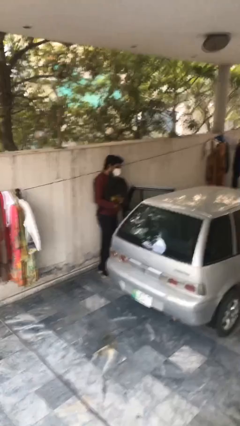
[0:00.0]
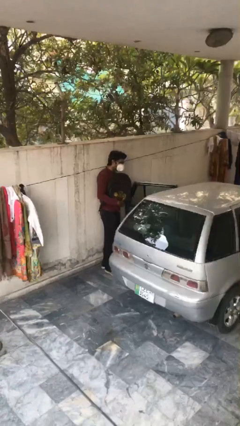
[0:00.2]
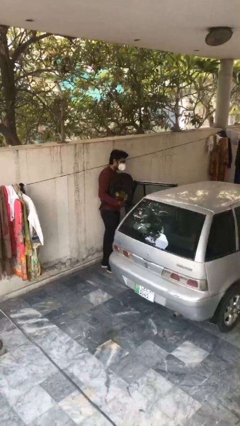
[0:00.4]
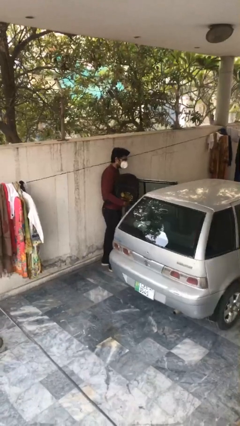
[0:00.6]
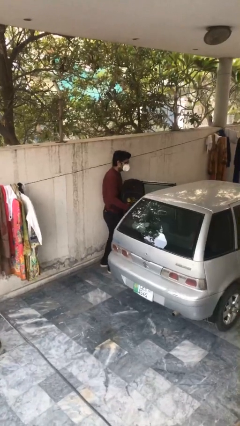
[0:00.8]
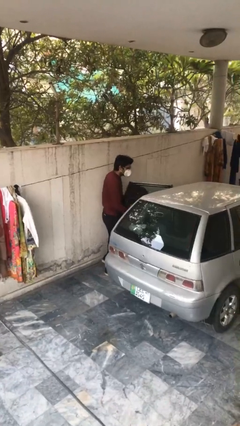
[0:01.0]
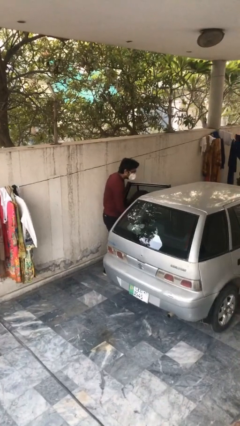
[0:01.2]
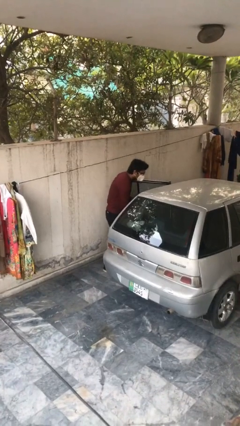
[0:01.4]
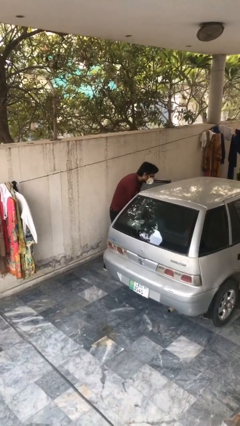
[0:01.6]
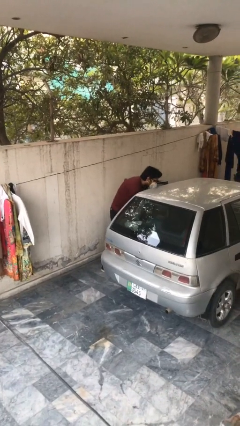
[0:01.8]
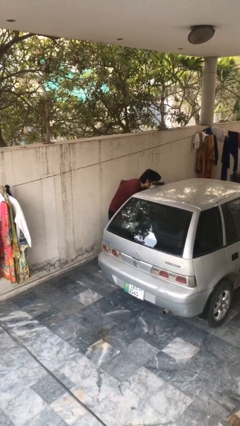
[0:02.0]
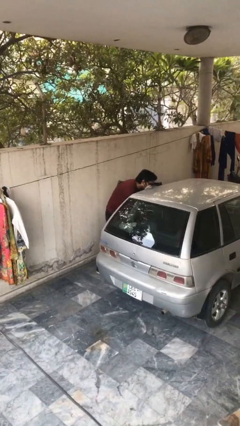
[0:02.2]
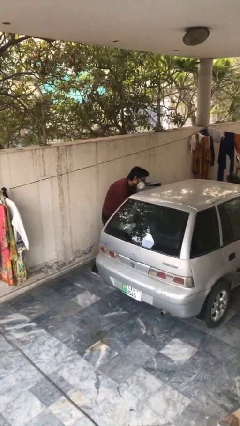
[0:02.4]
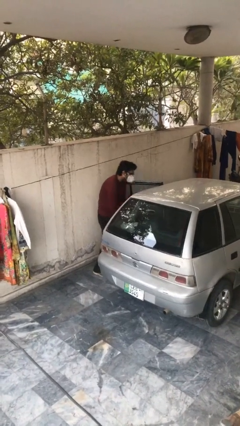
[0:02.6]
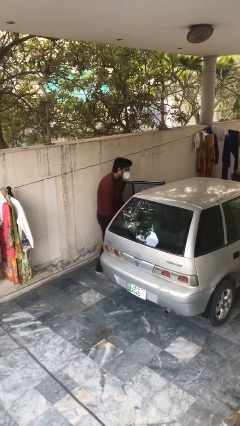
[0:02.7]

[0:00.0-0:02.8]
person loads car

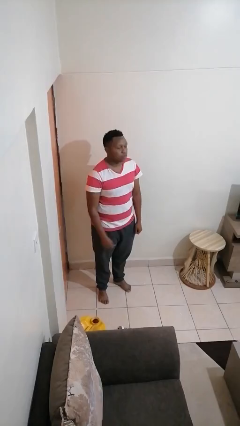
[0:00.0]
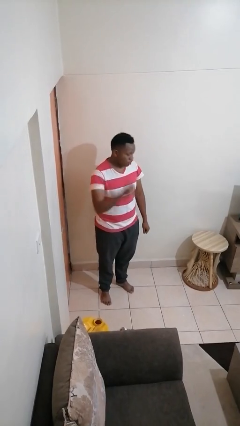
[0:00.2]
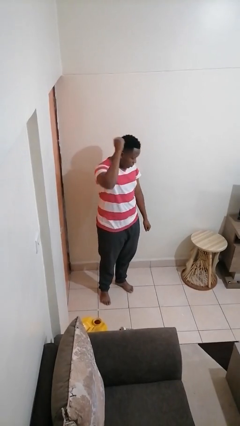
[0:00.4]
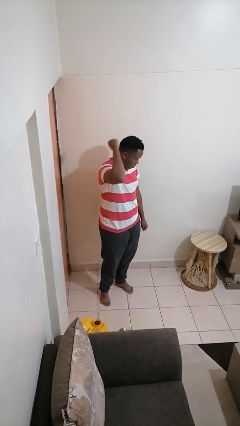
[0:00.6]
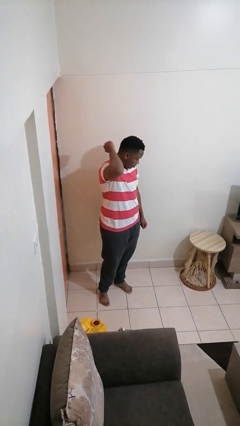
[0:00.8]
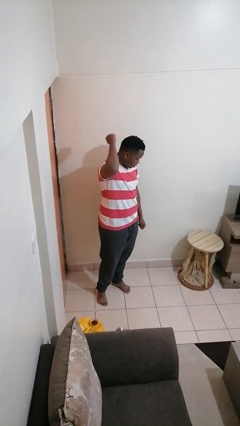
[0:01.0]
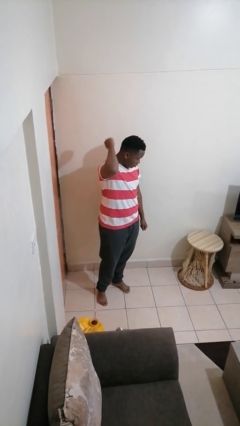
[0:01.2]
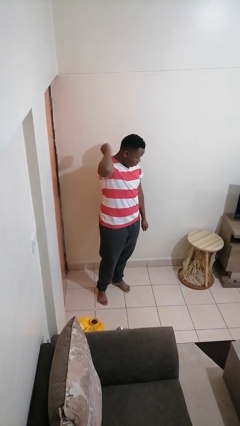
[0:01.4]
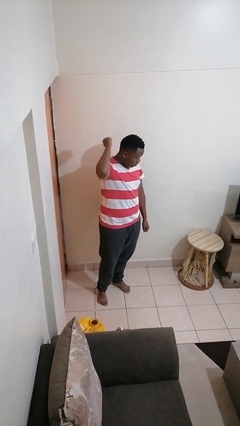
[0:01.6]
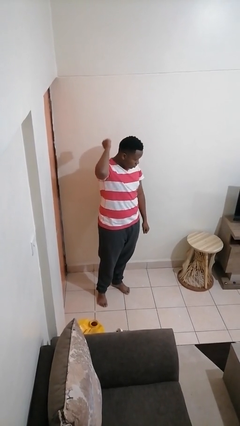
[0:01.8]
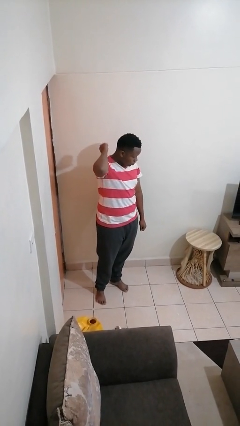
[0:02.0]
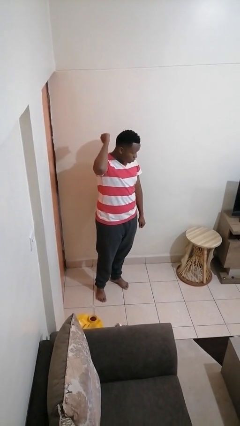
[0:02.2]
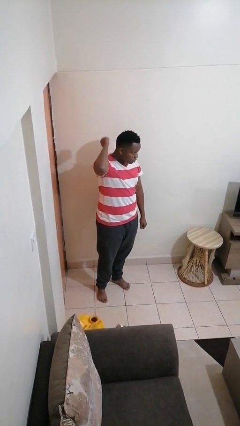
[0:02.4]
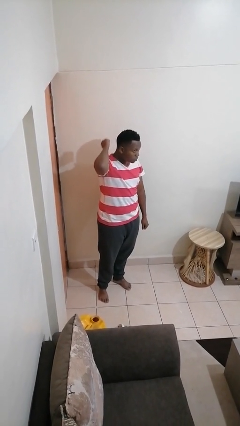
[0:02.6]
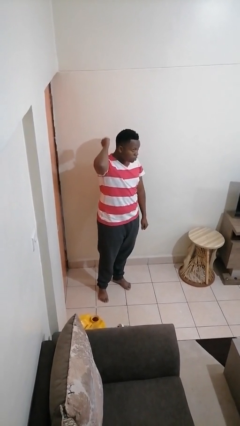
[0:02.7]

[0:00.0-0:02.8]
person gestures behind me

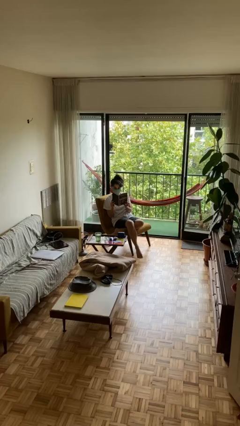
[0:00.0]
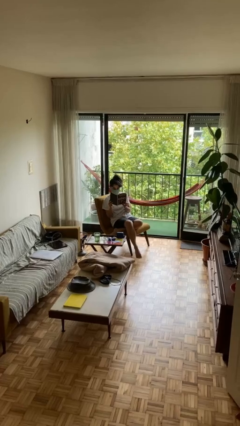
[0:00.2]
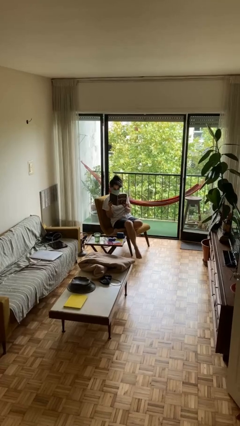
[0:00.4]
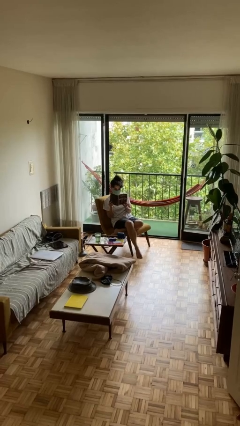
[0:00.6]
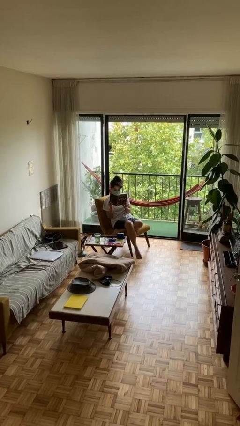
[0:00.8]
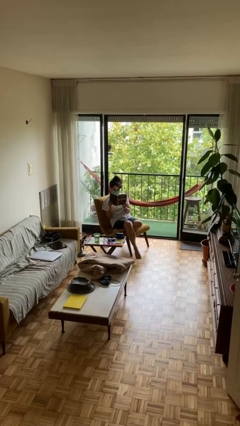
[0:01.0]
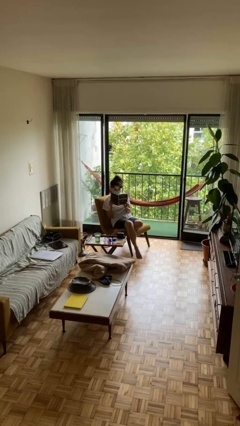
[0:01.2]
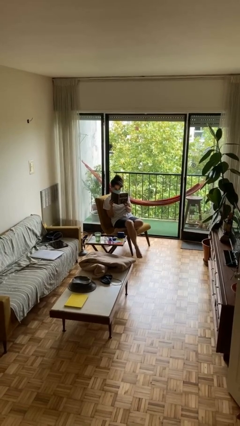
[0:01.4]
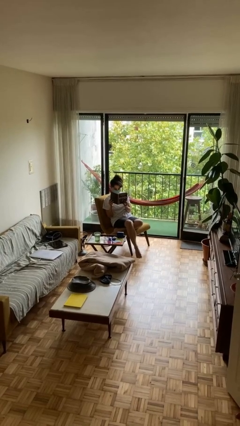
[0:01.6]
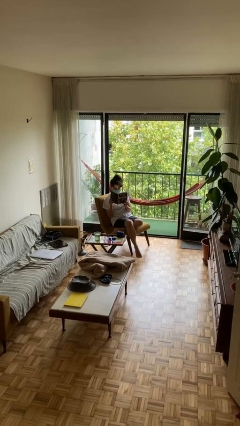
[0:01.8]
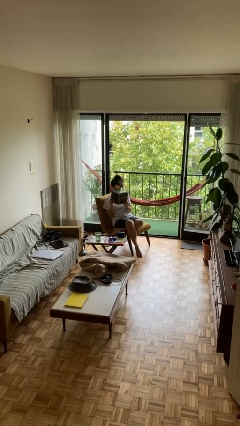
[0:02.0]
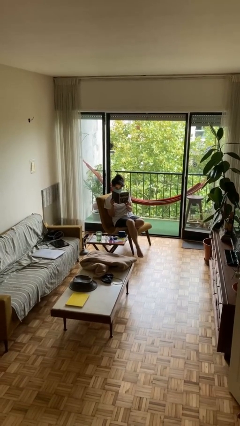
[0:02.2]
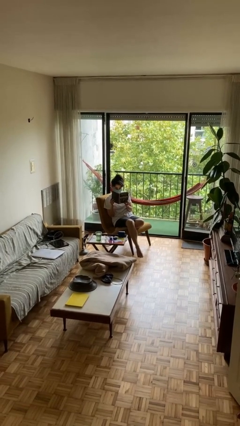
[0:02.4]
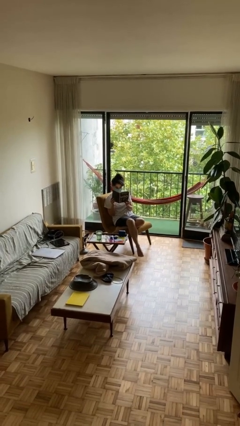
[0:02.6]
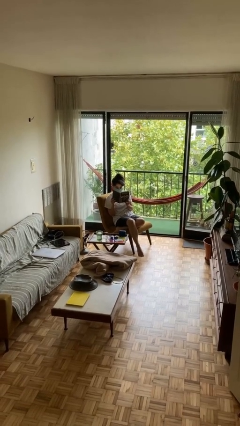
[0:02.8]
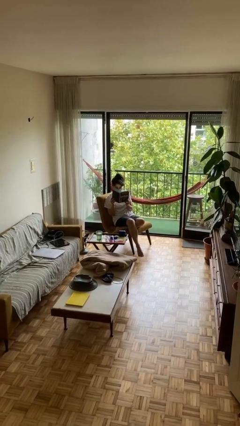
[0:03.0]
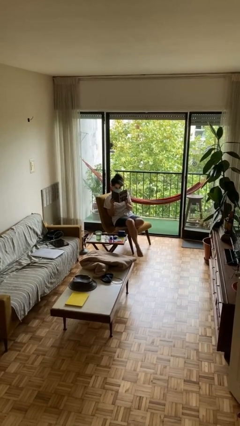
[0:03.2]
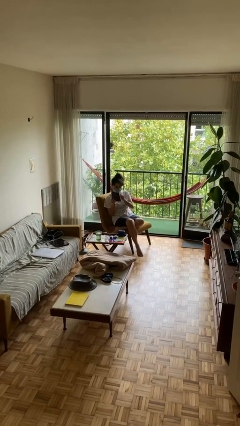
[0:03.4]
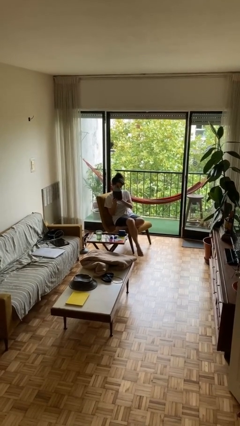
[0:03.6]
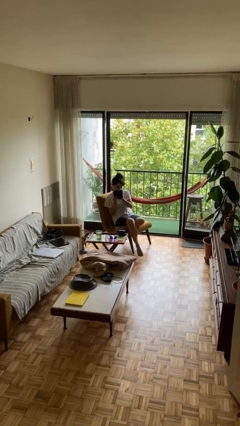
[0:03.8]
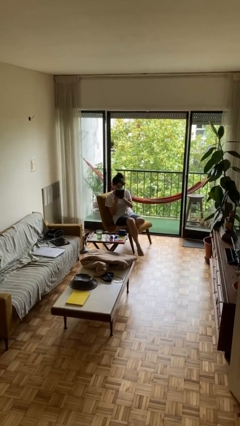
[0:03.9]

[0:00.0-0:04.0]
person reads document

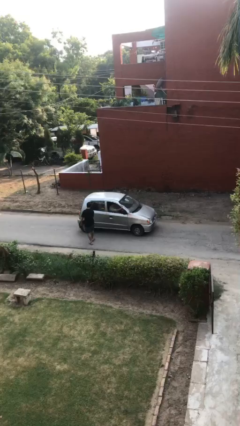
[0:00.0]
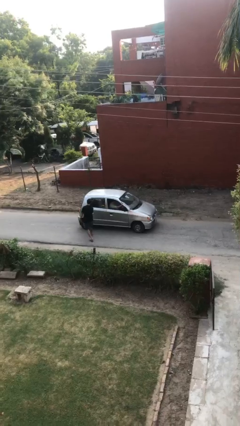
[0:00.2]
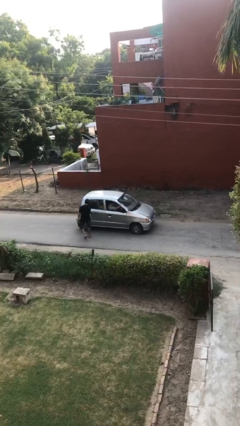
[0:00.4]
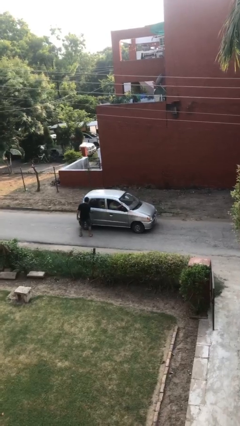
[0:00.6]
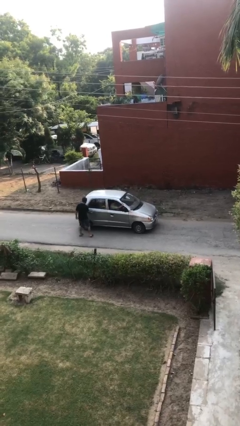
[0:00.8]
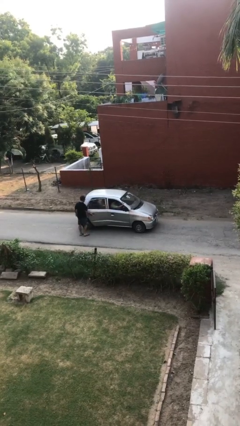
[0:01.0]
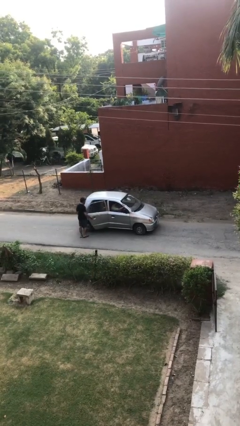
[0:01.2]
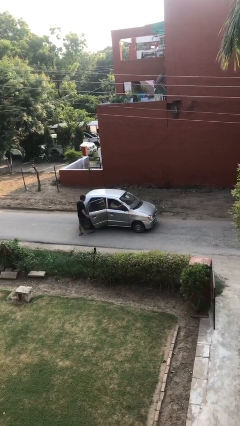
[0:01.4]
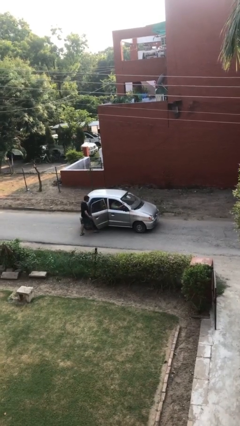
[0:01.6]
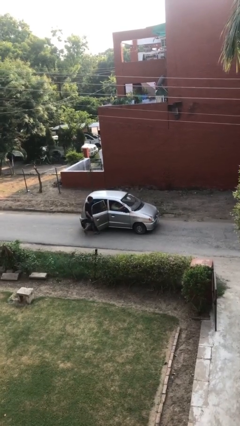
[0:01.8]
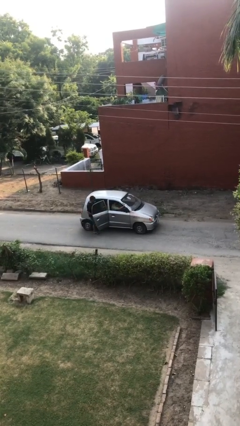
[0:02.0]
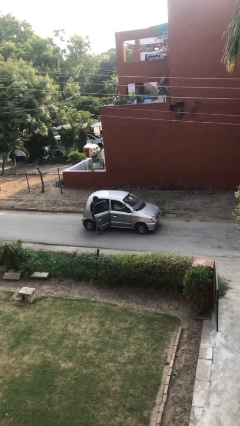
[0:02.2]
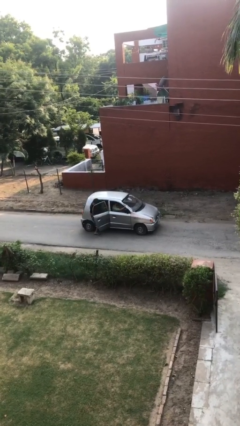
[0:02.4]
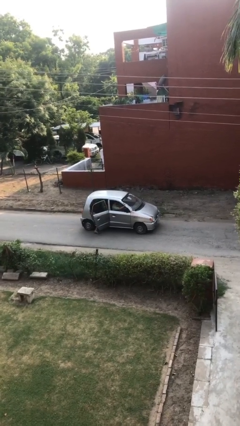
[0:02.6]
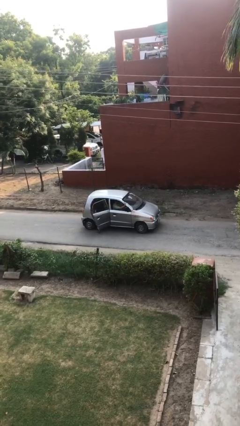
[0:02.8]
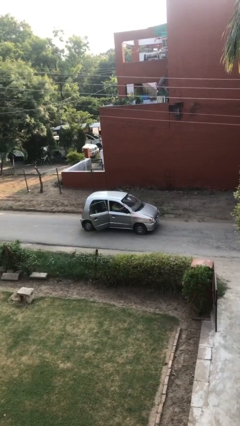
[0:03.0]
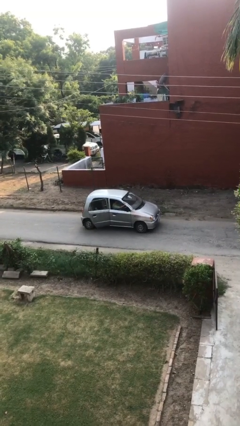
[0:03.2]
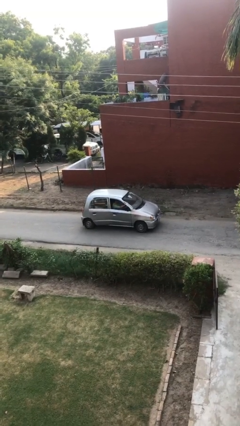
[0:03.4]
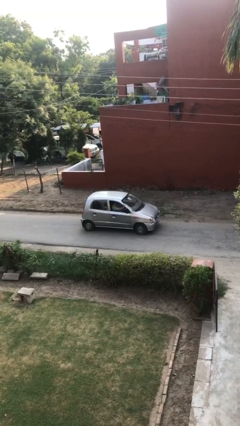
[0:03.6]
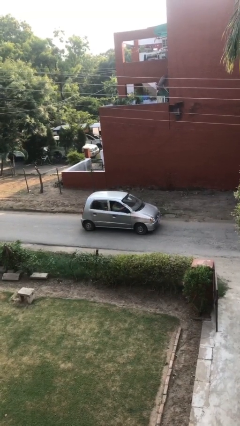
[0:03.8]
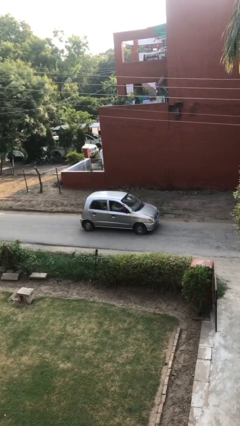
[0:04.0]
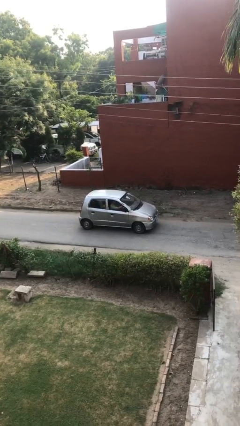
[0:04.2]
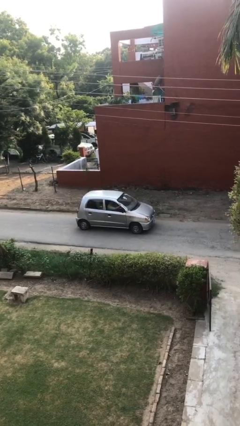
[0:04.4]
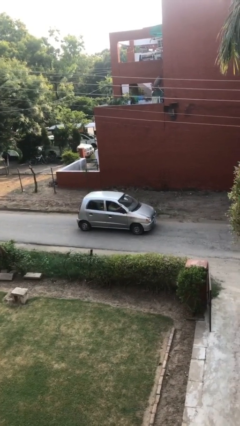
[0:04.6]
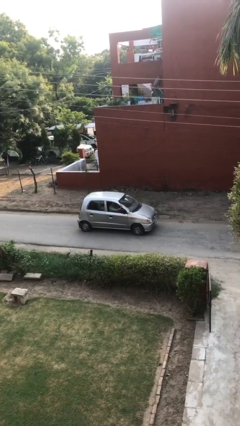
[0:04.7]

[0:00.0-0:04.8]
car picks up person

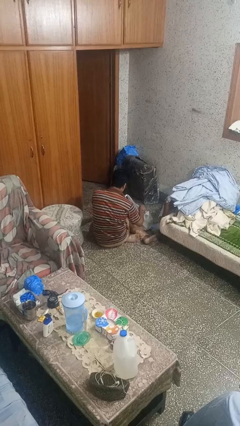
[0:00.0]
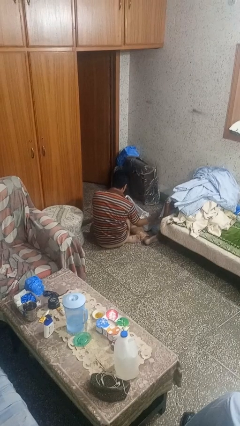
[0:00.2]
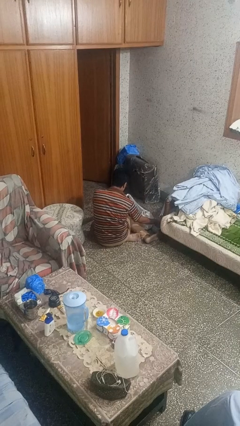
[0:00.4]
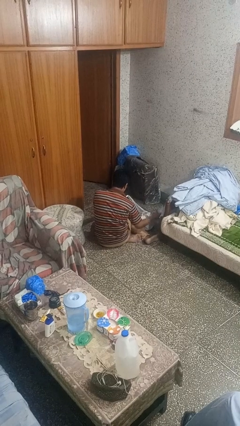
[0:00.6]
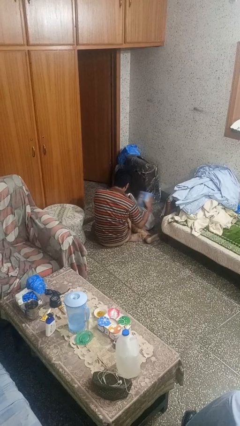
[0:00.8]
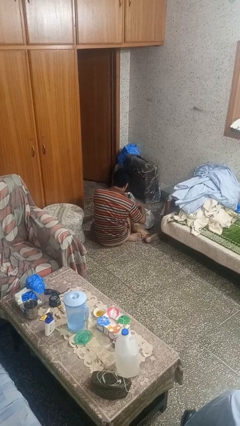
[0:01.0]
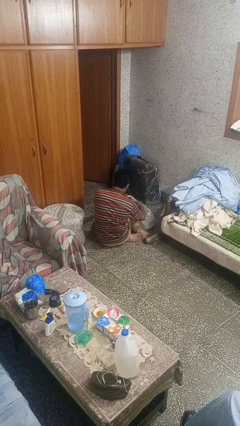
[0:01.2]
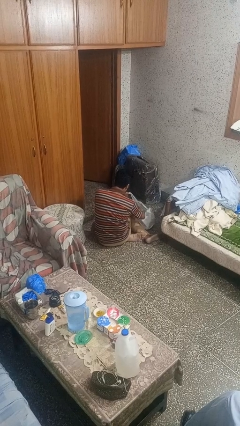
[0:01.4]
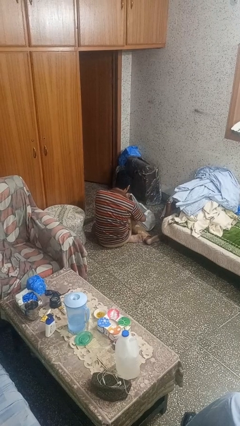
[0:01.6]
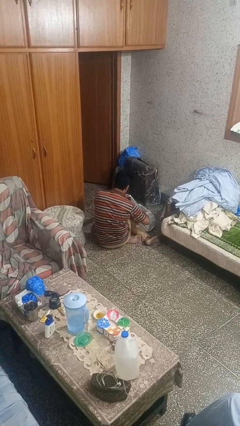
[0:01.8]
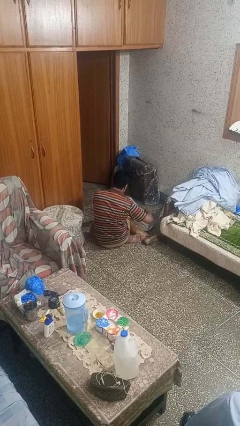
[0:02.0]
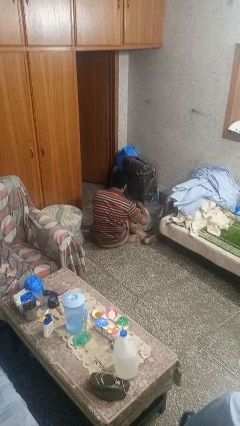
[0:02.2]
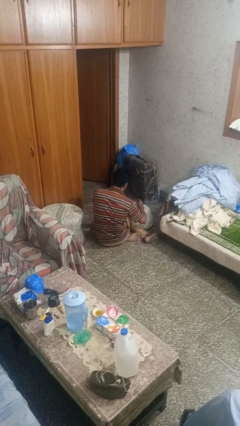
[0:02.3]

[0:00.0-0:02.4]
person puts object into bag

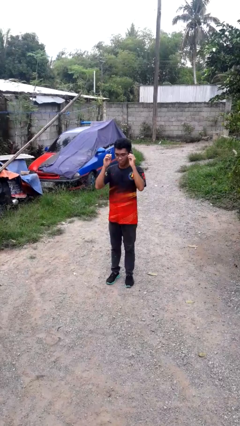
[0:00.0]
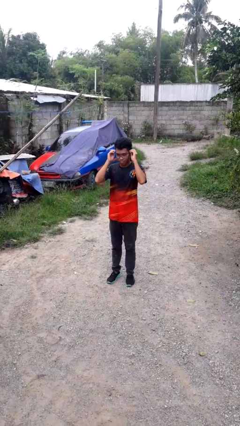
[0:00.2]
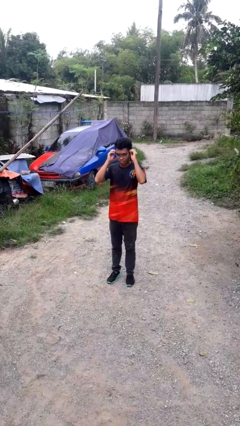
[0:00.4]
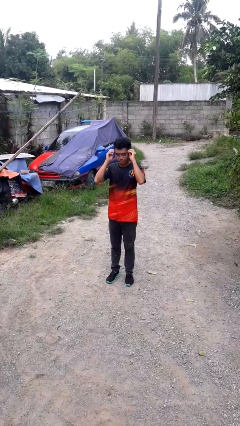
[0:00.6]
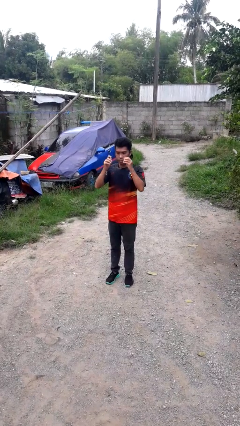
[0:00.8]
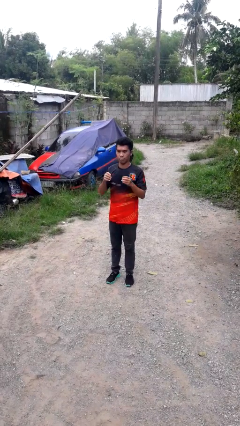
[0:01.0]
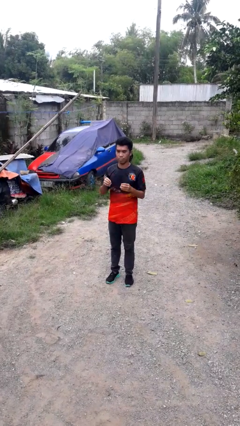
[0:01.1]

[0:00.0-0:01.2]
person takes off glasses
